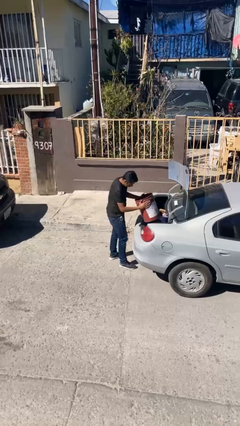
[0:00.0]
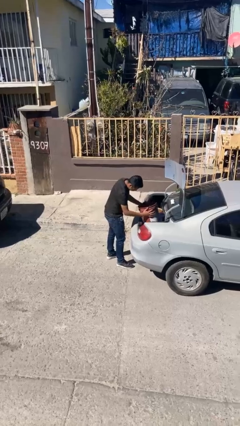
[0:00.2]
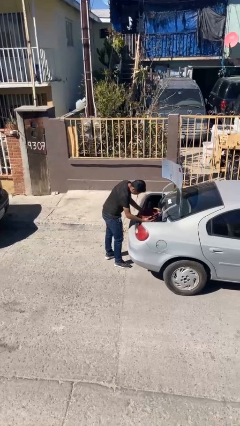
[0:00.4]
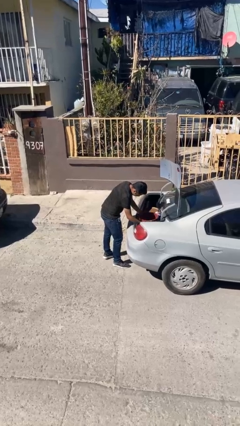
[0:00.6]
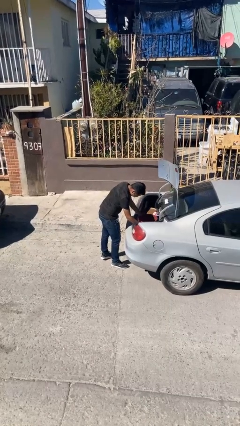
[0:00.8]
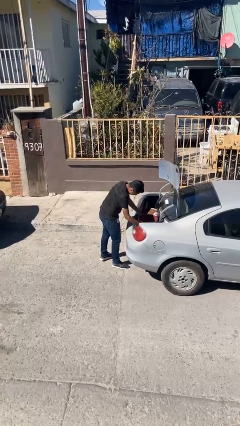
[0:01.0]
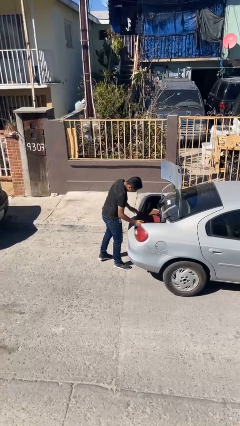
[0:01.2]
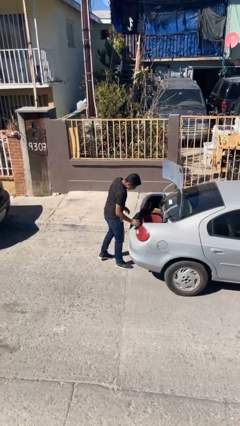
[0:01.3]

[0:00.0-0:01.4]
person loads car

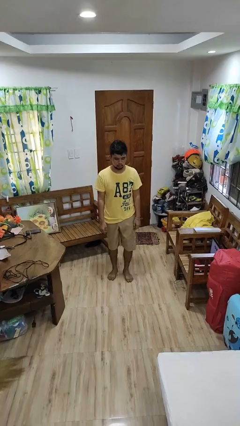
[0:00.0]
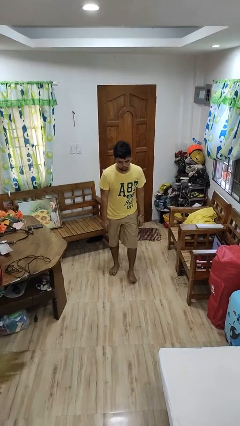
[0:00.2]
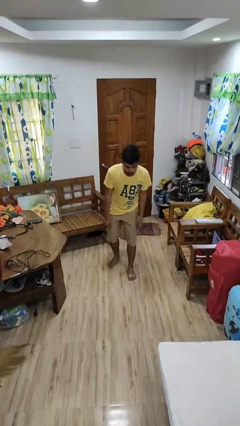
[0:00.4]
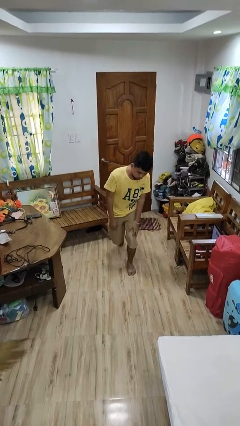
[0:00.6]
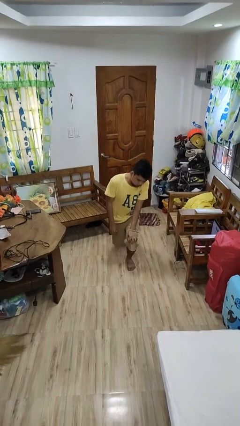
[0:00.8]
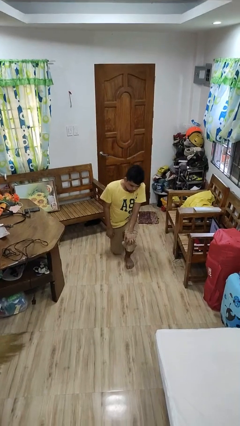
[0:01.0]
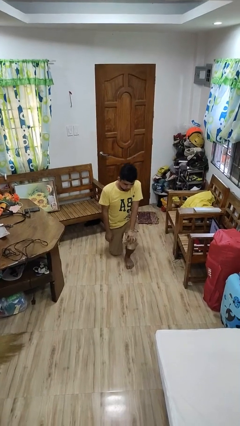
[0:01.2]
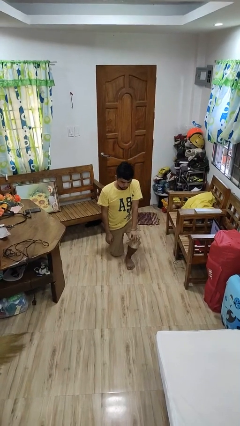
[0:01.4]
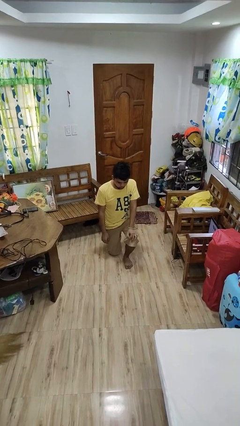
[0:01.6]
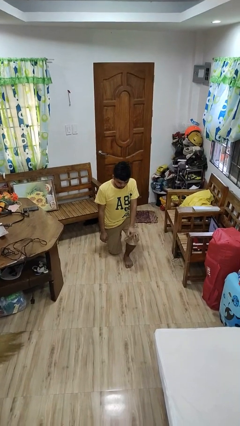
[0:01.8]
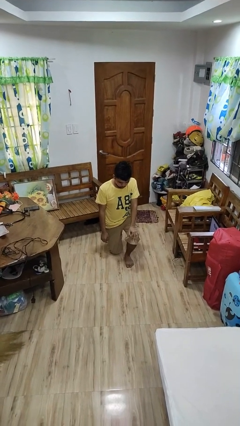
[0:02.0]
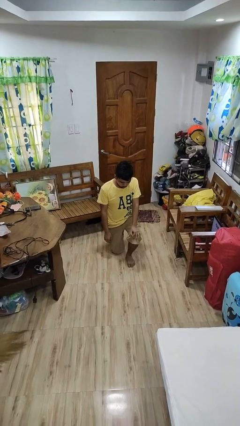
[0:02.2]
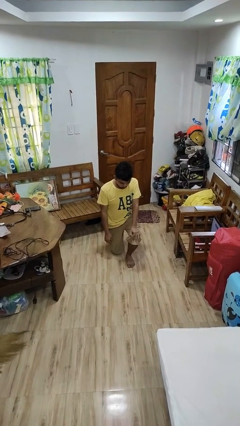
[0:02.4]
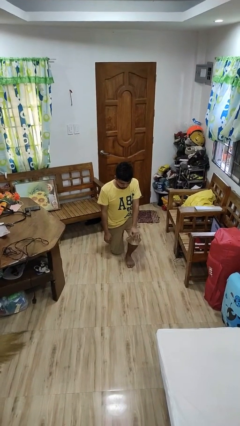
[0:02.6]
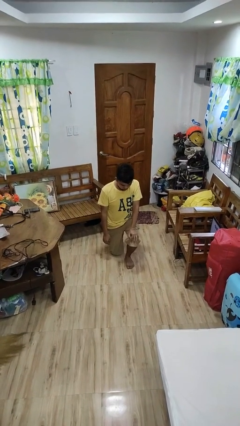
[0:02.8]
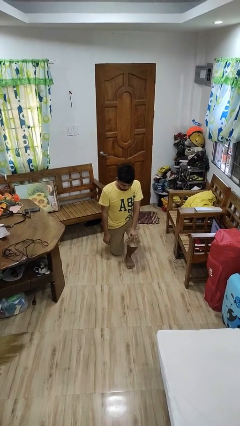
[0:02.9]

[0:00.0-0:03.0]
person kneels

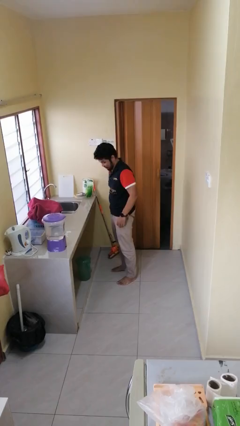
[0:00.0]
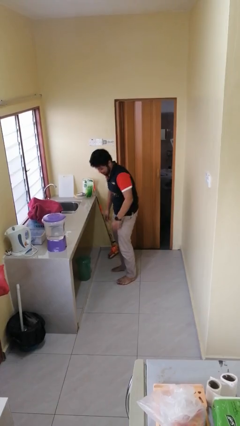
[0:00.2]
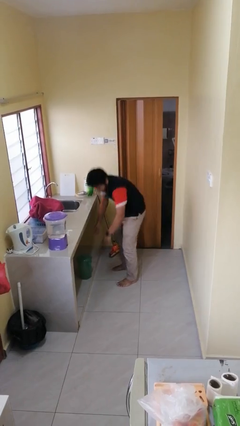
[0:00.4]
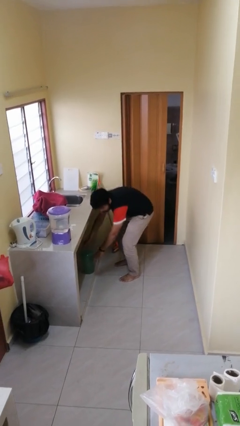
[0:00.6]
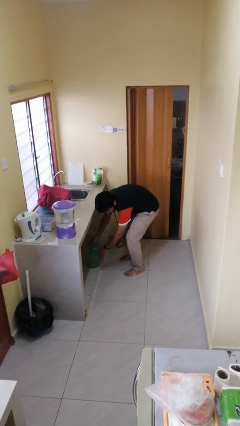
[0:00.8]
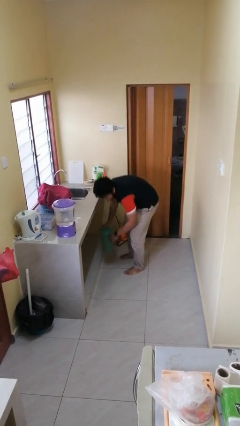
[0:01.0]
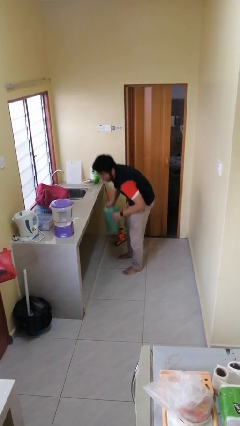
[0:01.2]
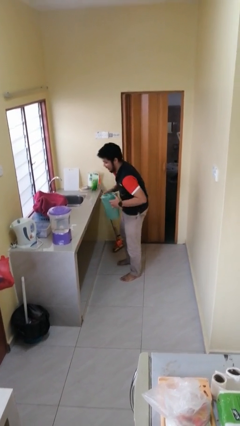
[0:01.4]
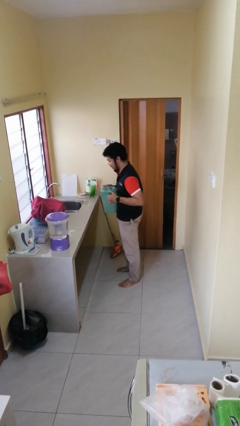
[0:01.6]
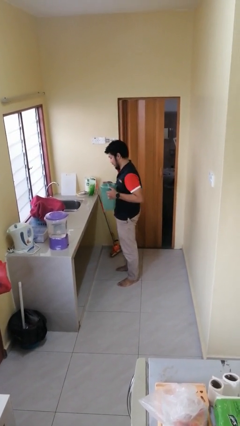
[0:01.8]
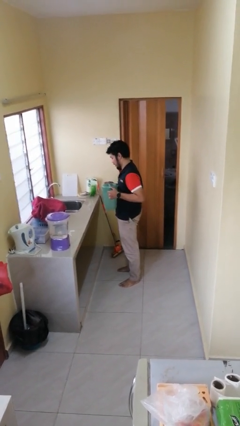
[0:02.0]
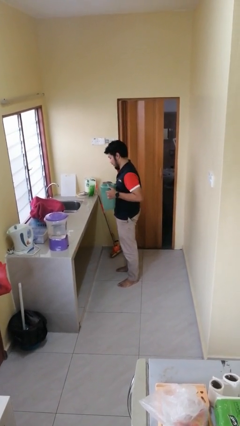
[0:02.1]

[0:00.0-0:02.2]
person picks up object from cabinet

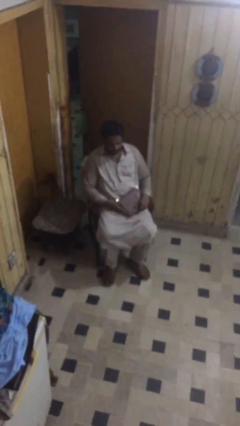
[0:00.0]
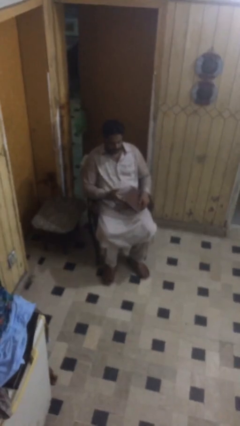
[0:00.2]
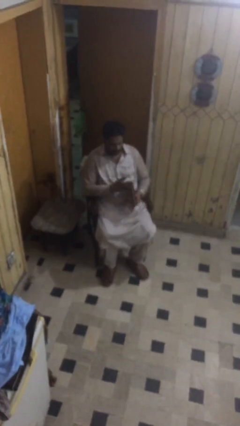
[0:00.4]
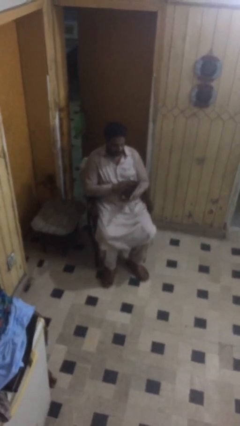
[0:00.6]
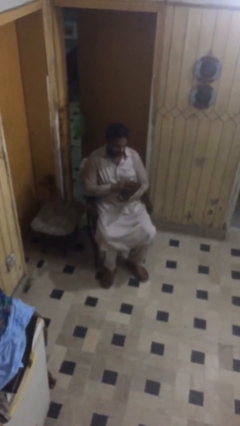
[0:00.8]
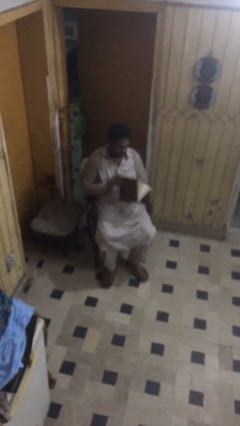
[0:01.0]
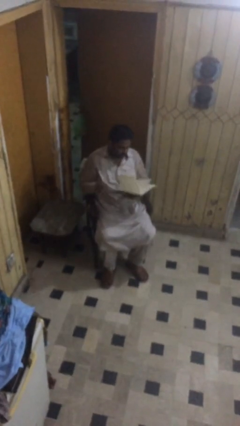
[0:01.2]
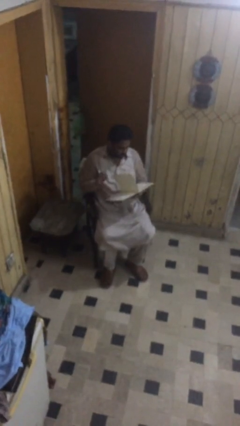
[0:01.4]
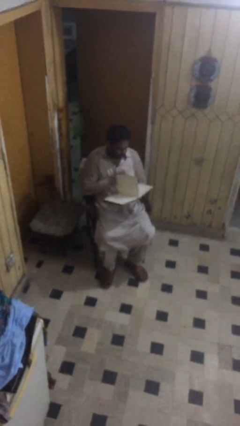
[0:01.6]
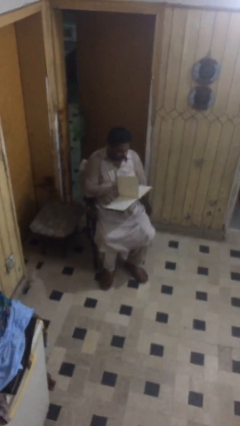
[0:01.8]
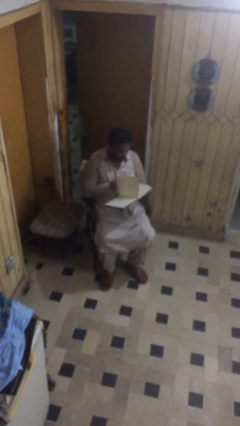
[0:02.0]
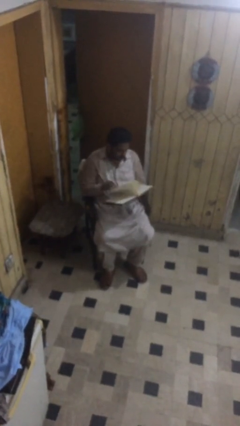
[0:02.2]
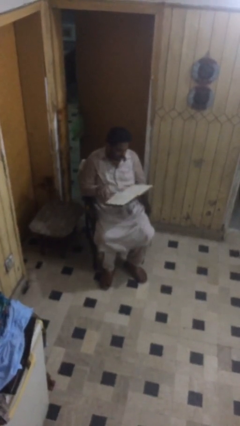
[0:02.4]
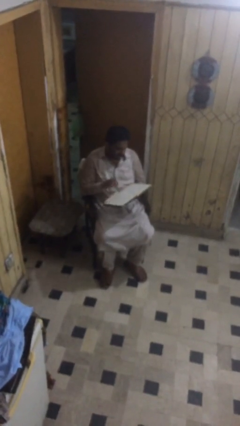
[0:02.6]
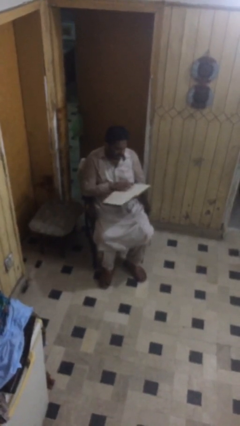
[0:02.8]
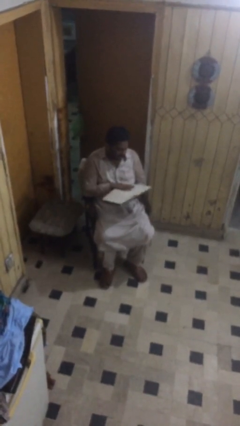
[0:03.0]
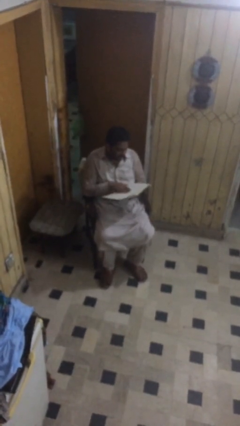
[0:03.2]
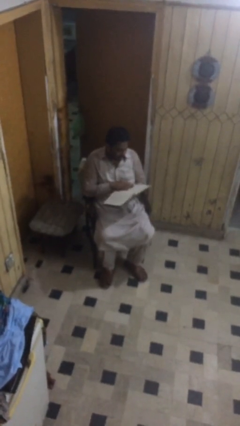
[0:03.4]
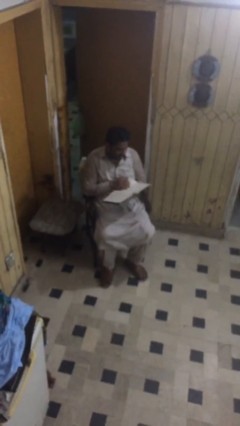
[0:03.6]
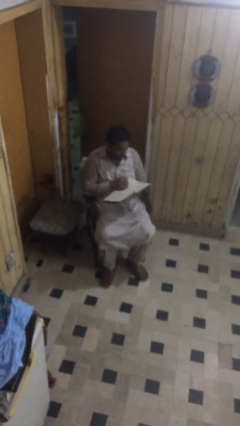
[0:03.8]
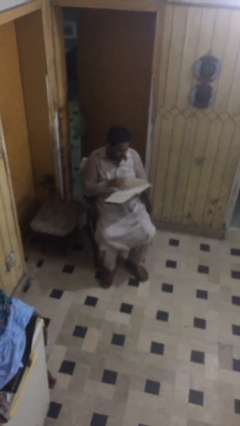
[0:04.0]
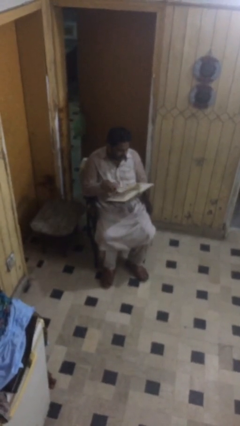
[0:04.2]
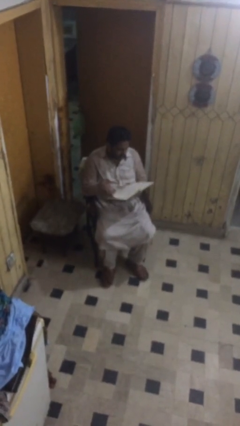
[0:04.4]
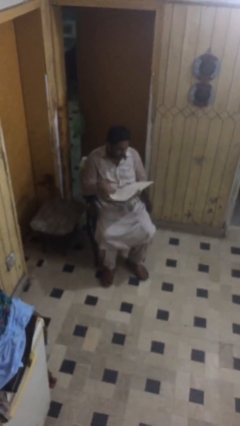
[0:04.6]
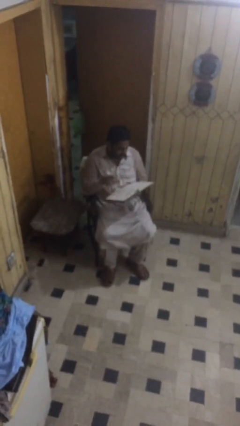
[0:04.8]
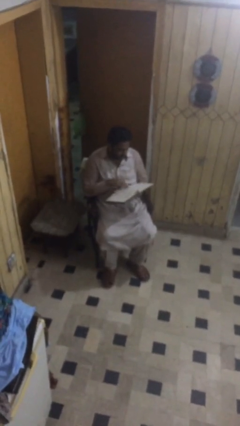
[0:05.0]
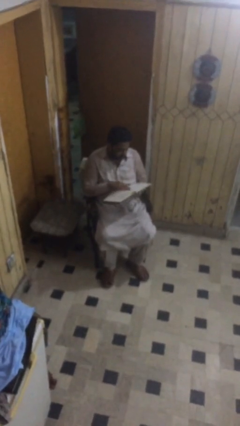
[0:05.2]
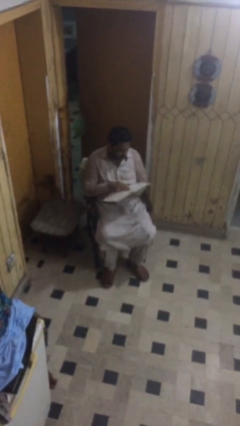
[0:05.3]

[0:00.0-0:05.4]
person reads document

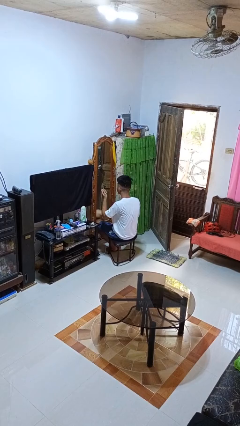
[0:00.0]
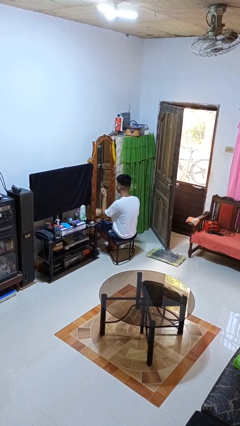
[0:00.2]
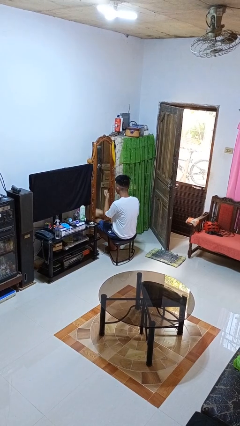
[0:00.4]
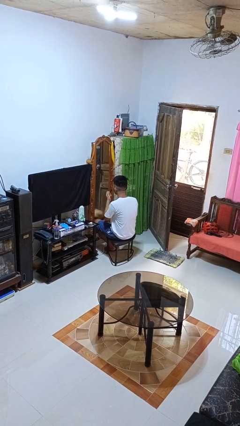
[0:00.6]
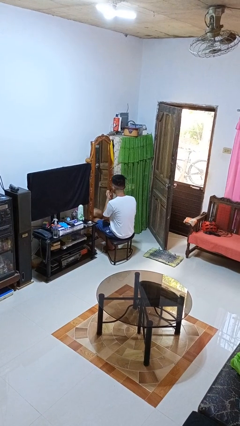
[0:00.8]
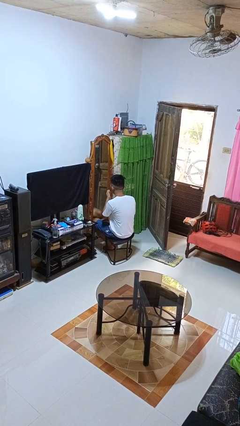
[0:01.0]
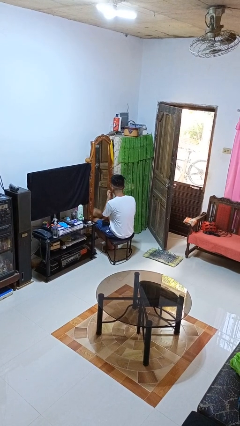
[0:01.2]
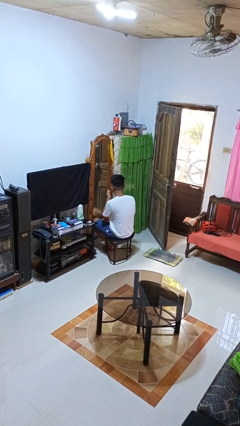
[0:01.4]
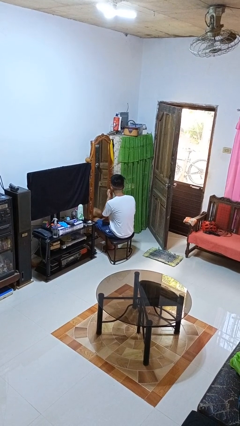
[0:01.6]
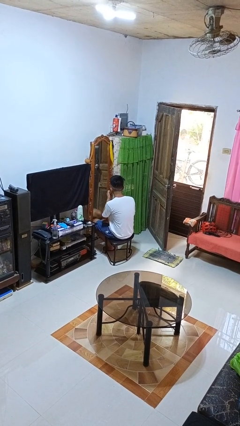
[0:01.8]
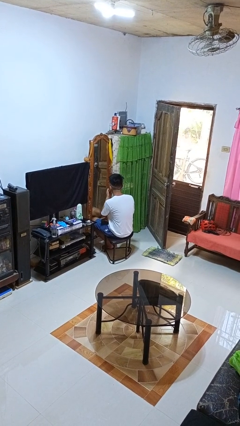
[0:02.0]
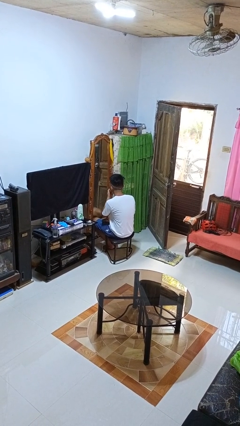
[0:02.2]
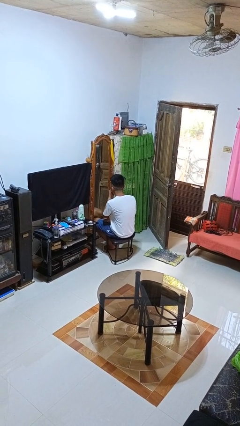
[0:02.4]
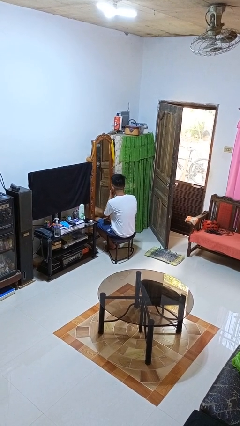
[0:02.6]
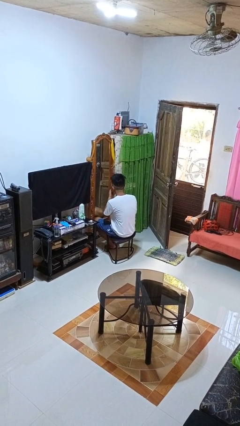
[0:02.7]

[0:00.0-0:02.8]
person applies lip makeup

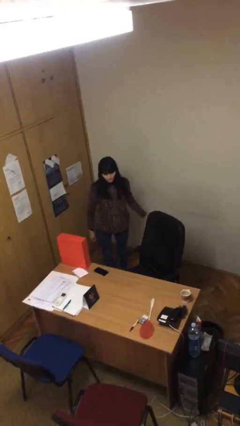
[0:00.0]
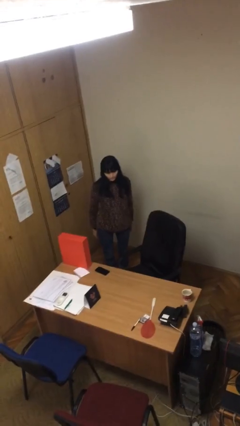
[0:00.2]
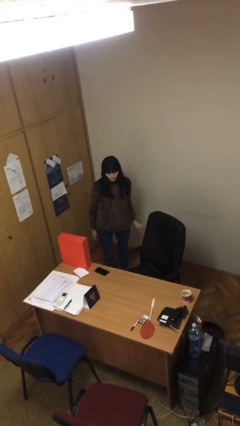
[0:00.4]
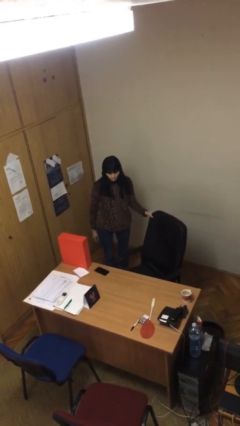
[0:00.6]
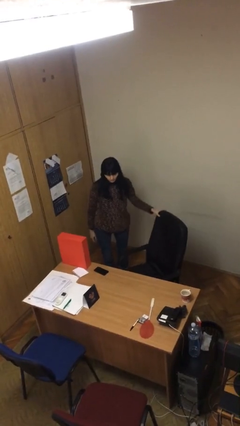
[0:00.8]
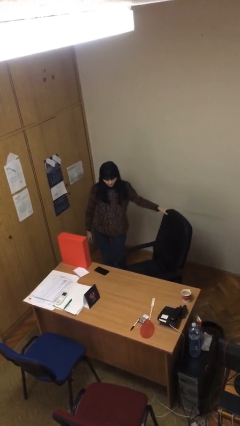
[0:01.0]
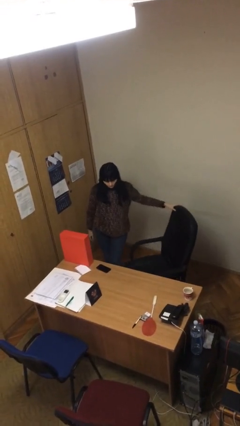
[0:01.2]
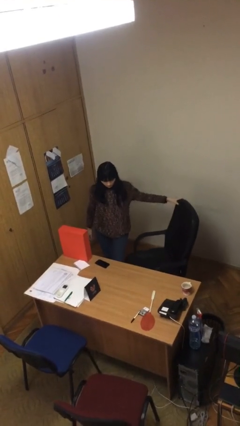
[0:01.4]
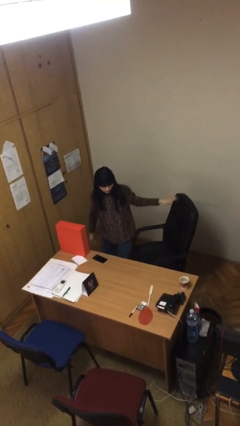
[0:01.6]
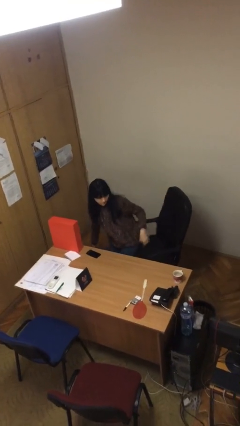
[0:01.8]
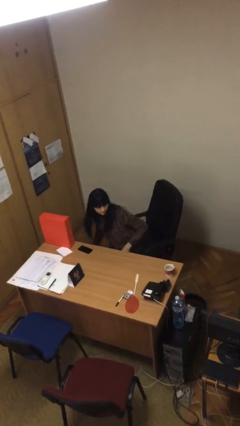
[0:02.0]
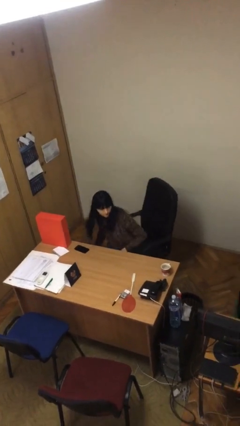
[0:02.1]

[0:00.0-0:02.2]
person sits down
